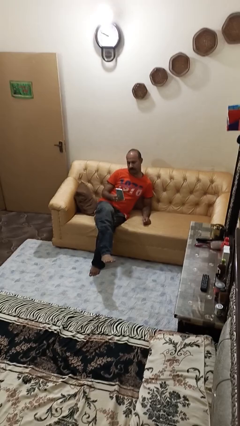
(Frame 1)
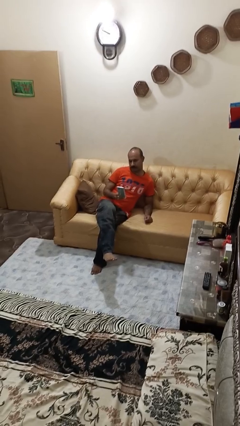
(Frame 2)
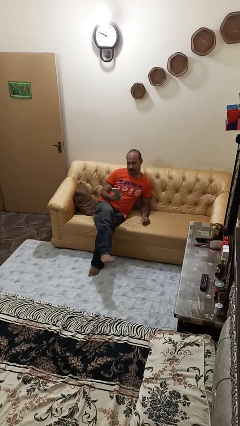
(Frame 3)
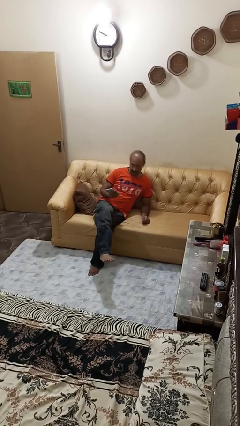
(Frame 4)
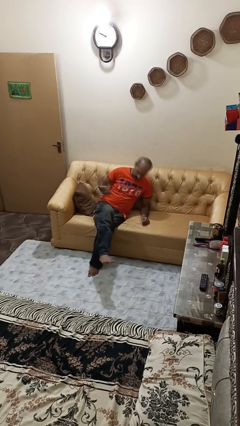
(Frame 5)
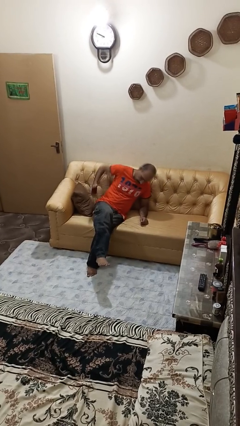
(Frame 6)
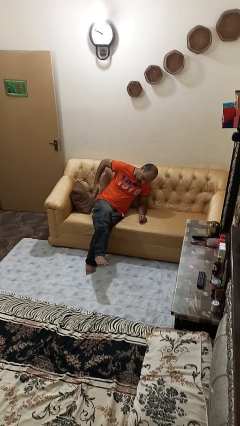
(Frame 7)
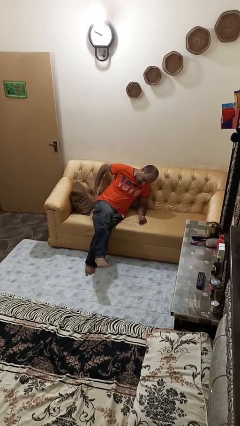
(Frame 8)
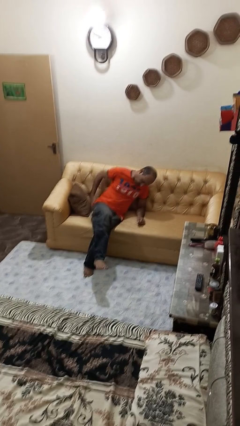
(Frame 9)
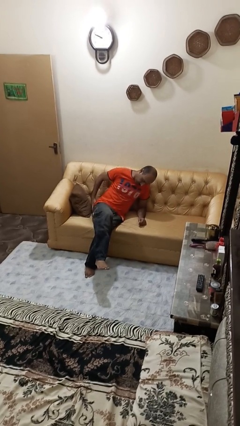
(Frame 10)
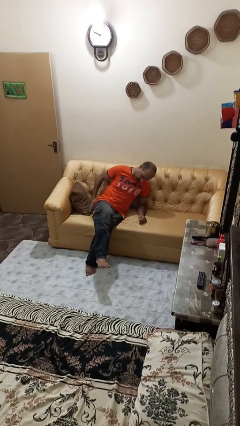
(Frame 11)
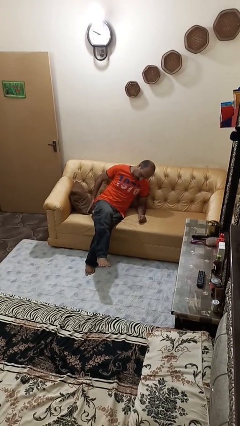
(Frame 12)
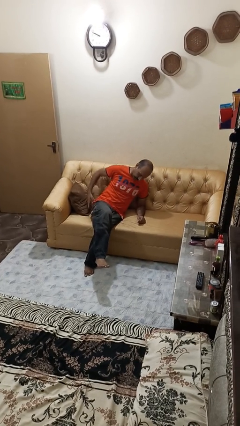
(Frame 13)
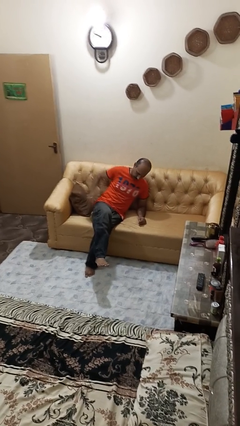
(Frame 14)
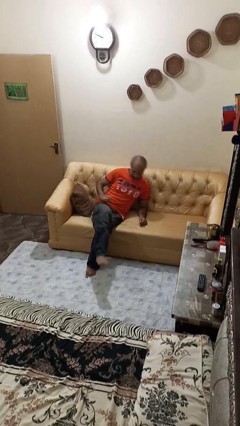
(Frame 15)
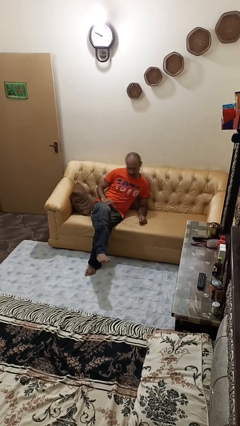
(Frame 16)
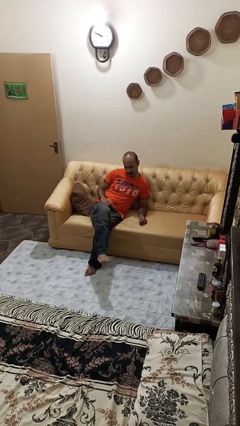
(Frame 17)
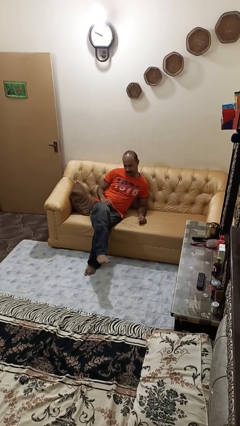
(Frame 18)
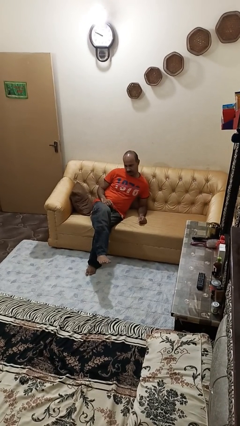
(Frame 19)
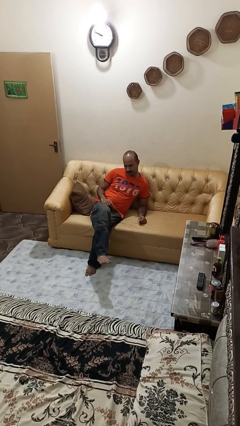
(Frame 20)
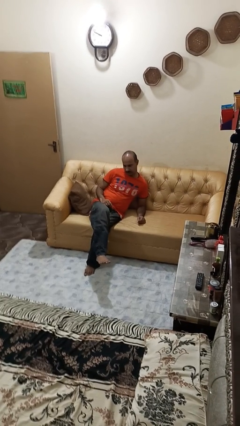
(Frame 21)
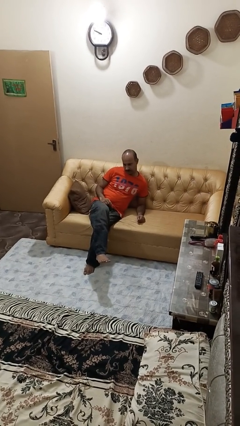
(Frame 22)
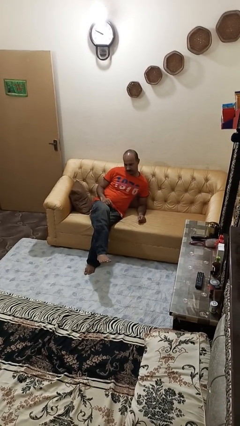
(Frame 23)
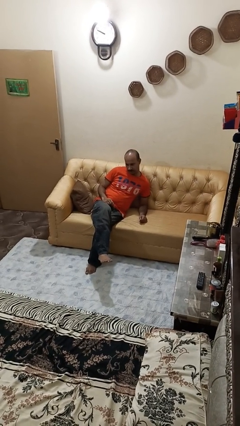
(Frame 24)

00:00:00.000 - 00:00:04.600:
person puts phone into pocket

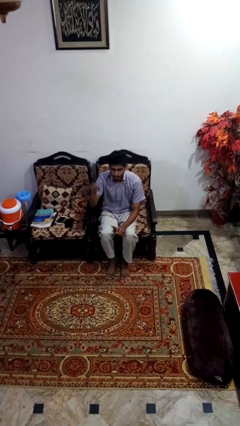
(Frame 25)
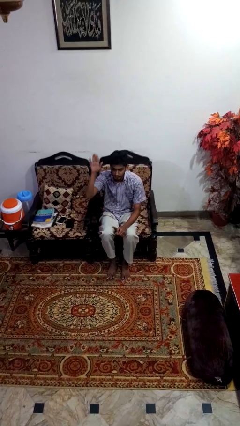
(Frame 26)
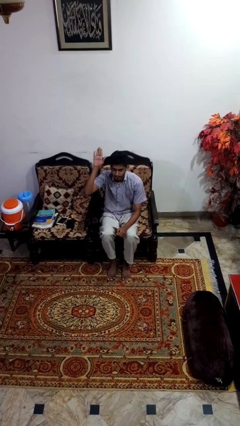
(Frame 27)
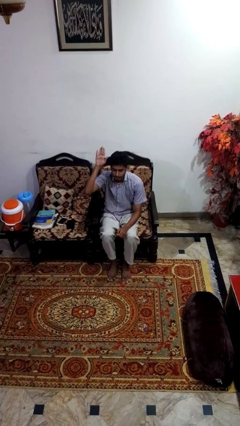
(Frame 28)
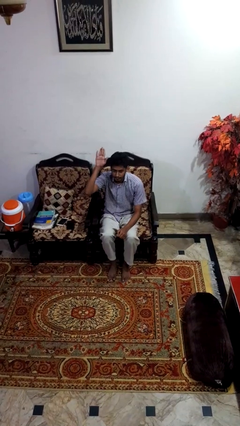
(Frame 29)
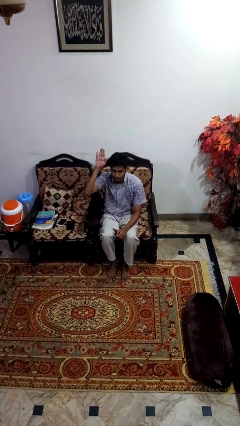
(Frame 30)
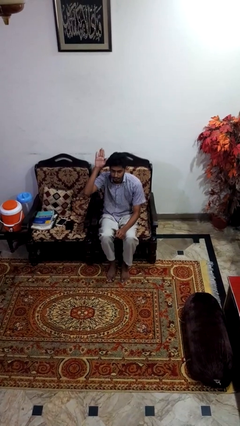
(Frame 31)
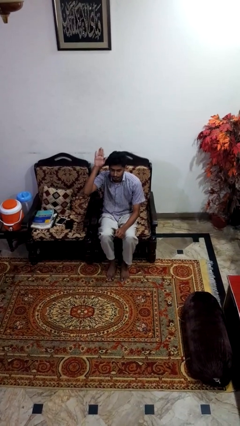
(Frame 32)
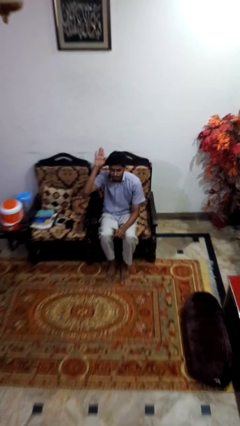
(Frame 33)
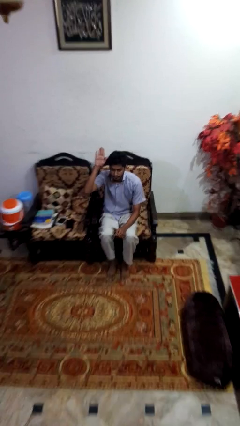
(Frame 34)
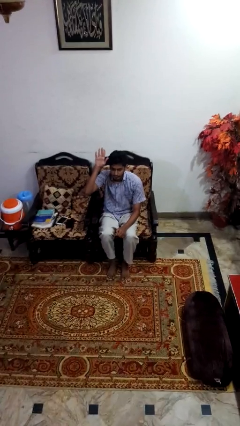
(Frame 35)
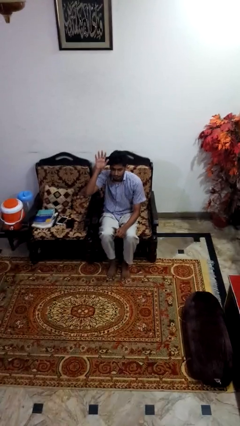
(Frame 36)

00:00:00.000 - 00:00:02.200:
person gestures raise hand

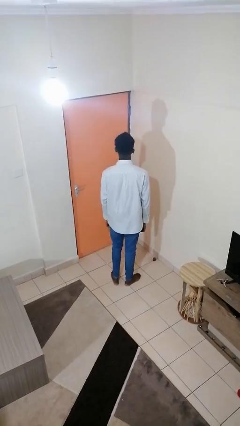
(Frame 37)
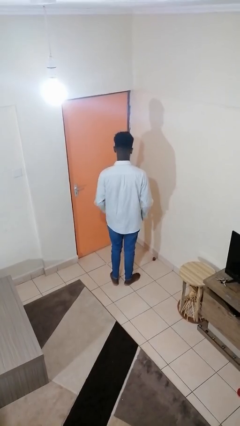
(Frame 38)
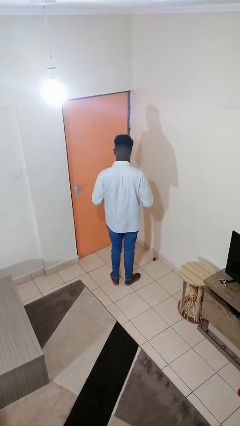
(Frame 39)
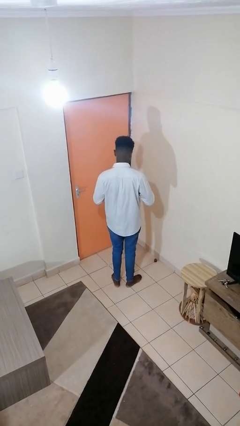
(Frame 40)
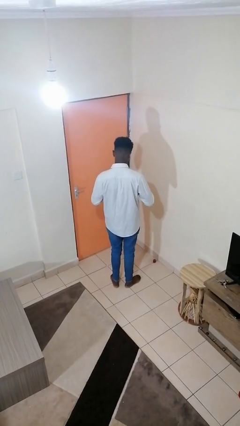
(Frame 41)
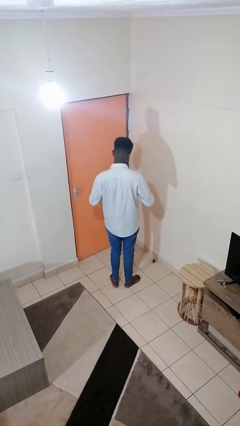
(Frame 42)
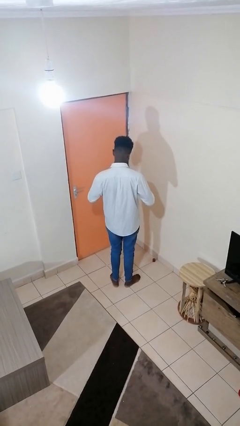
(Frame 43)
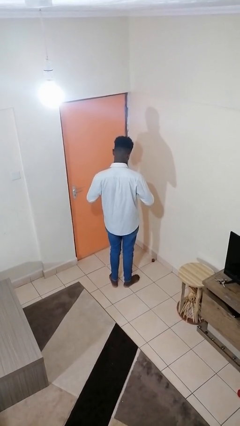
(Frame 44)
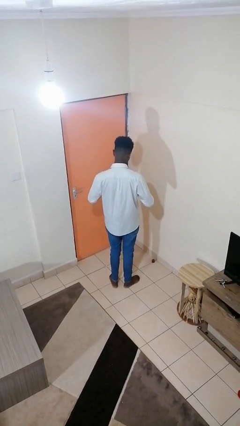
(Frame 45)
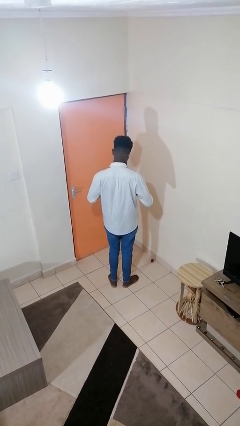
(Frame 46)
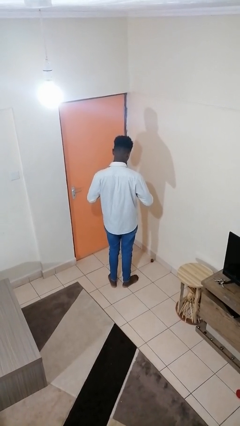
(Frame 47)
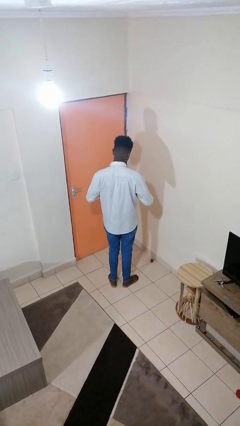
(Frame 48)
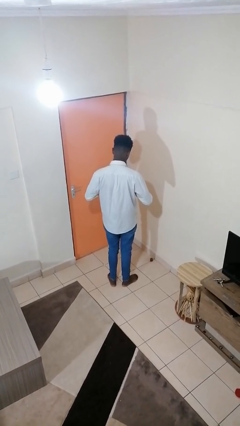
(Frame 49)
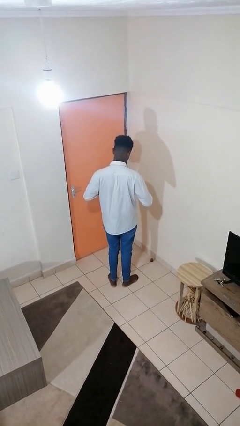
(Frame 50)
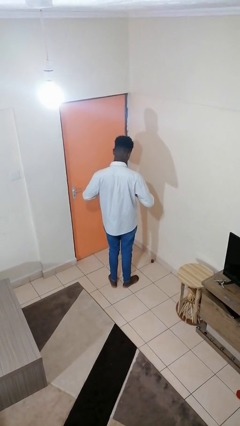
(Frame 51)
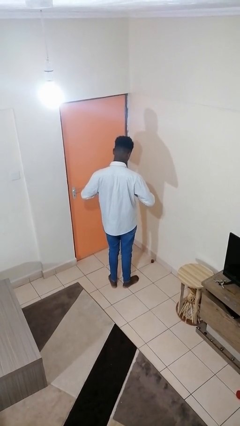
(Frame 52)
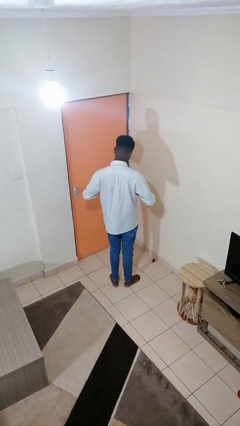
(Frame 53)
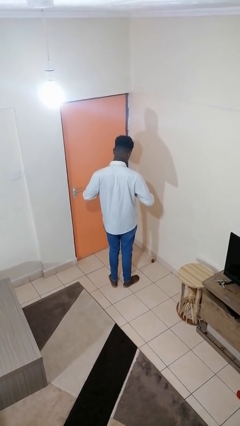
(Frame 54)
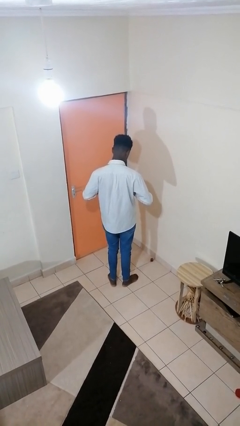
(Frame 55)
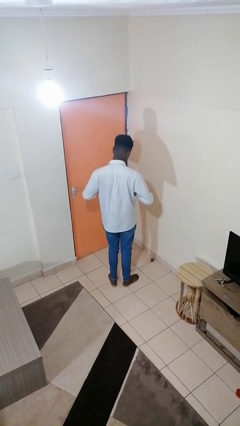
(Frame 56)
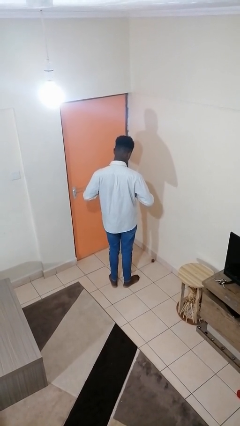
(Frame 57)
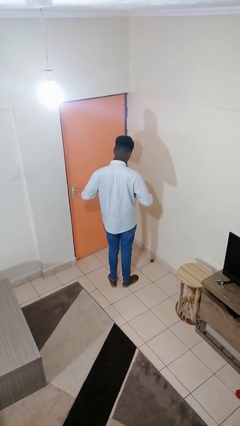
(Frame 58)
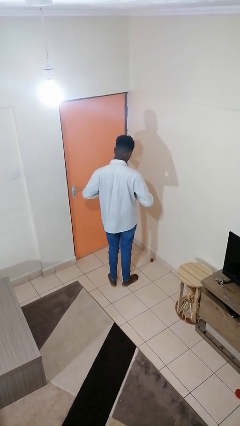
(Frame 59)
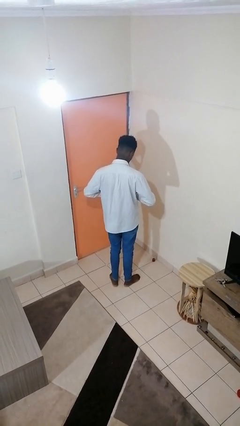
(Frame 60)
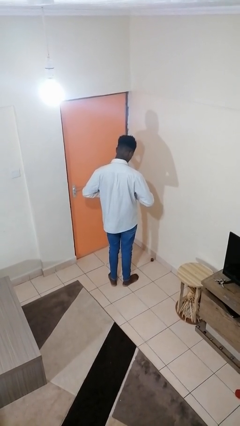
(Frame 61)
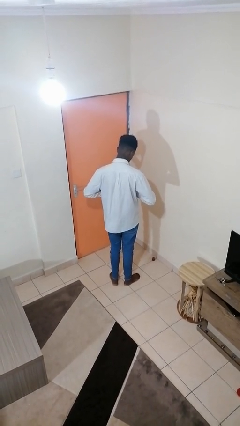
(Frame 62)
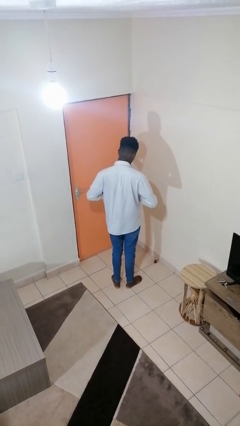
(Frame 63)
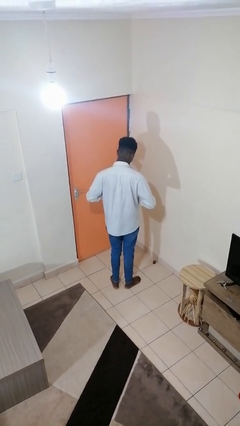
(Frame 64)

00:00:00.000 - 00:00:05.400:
person buttons shirt

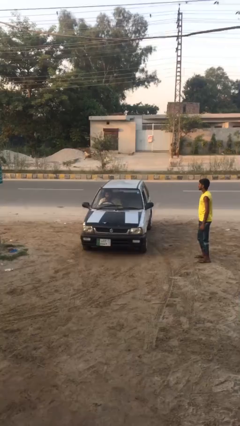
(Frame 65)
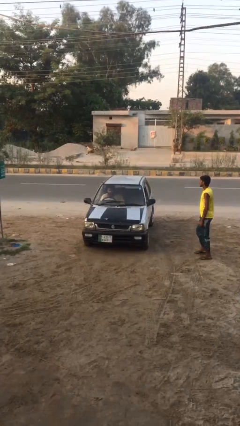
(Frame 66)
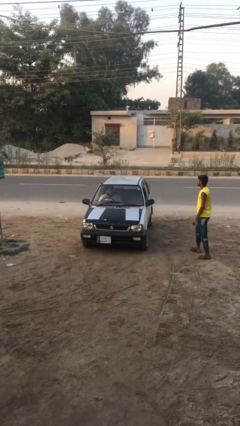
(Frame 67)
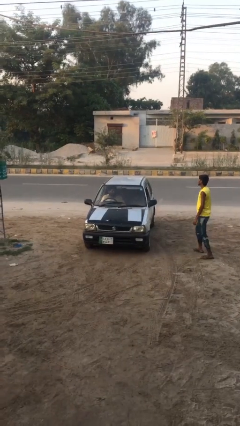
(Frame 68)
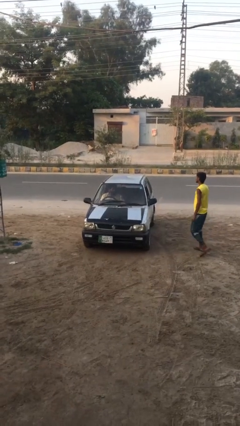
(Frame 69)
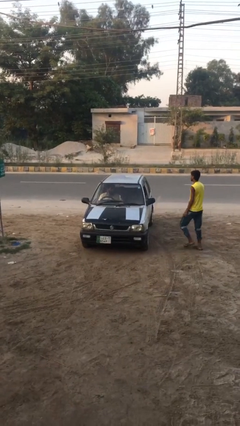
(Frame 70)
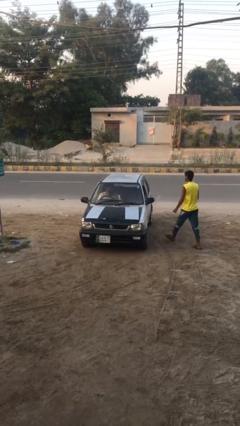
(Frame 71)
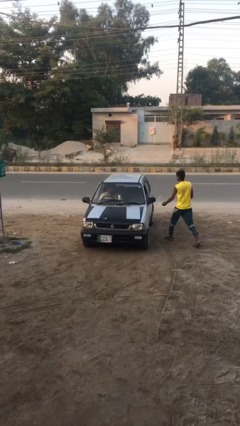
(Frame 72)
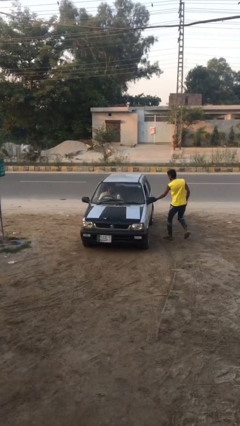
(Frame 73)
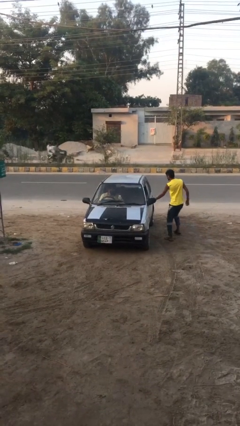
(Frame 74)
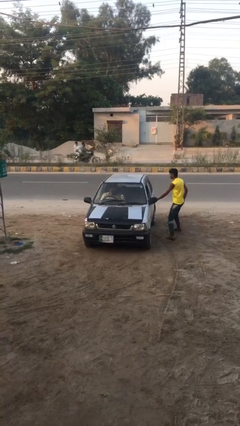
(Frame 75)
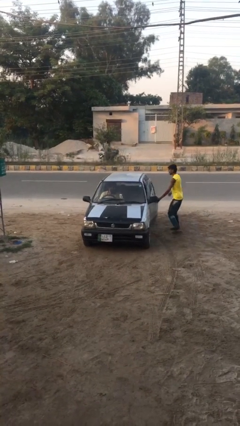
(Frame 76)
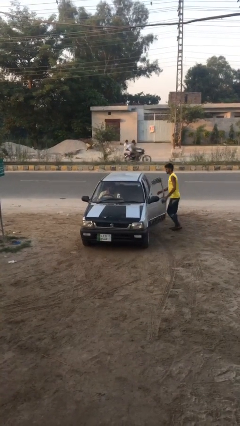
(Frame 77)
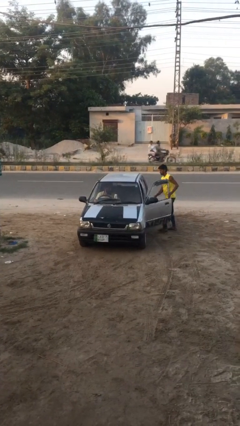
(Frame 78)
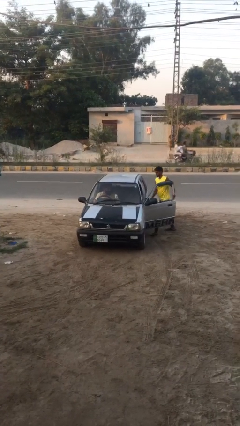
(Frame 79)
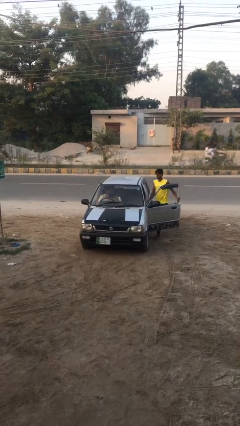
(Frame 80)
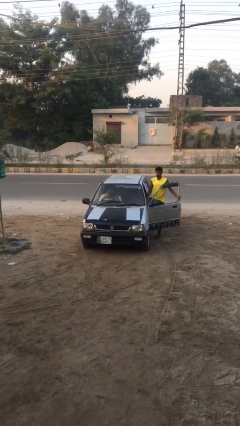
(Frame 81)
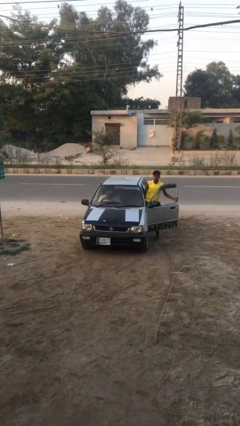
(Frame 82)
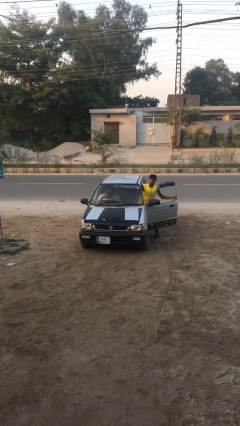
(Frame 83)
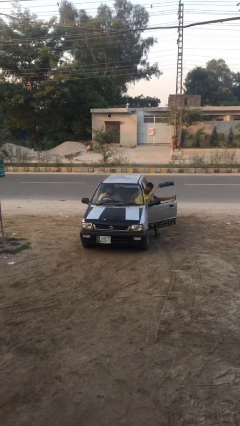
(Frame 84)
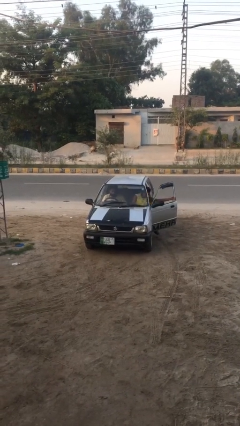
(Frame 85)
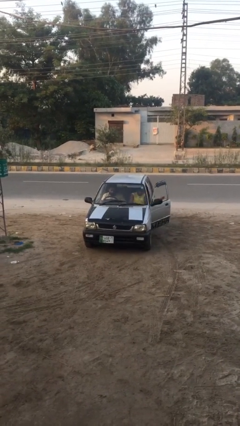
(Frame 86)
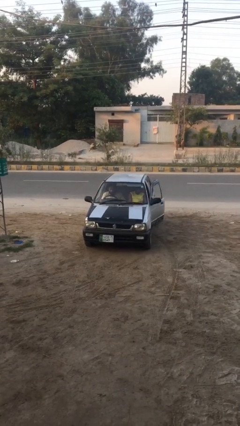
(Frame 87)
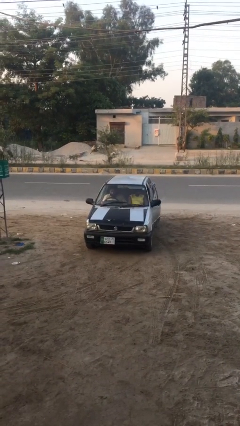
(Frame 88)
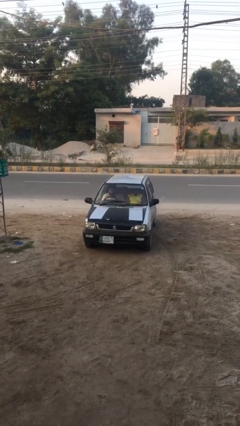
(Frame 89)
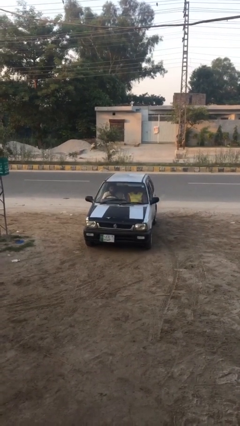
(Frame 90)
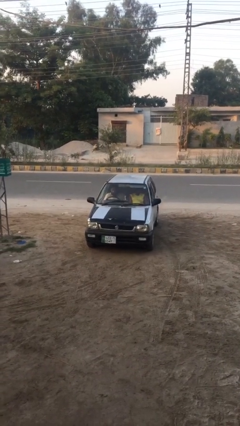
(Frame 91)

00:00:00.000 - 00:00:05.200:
car picks up person

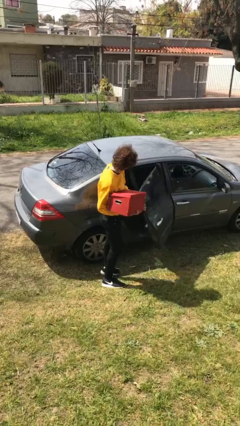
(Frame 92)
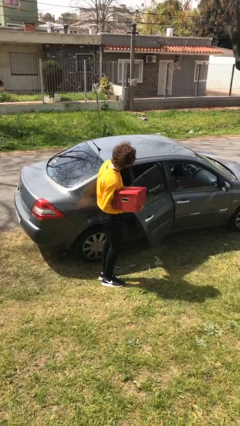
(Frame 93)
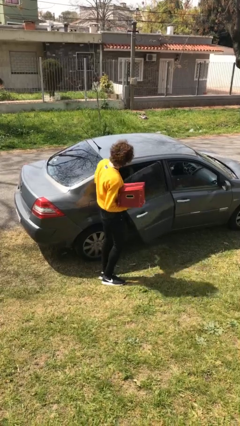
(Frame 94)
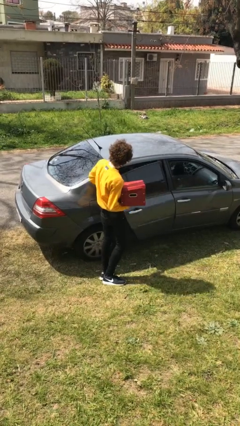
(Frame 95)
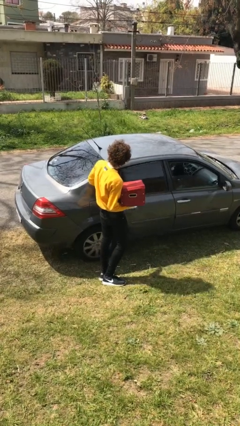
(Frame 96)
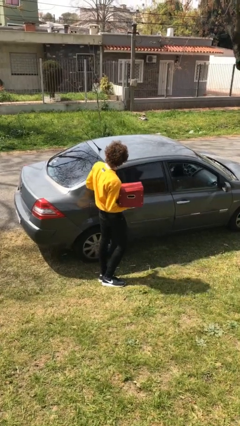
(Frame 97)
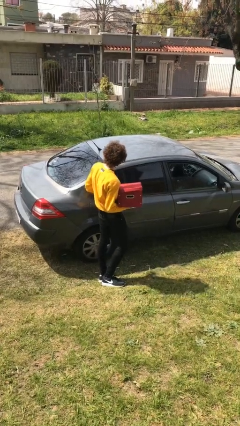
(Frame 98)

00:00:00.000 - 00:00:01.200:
person closes car door
